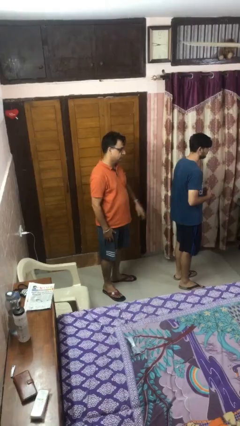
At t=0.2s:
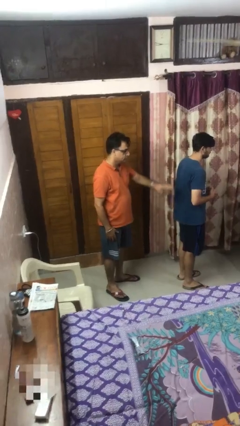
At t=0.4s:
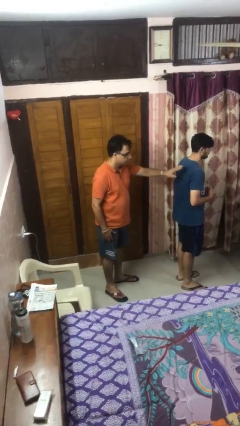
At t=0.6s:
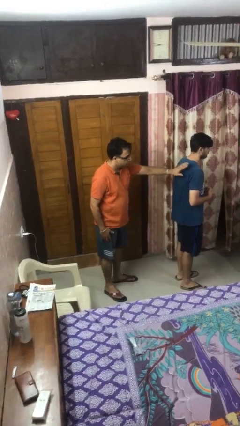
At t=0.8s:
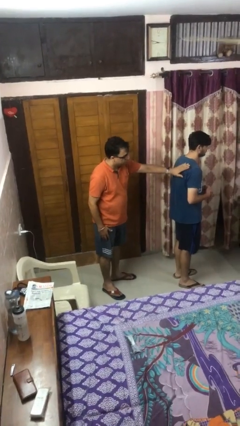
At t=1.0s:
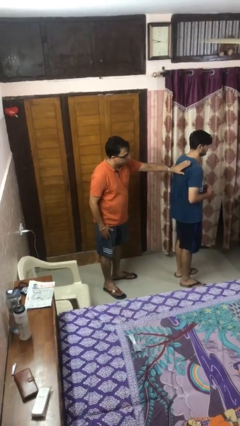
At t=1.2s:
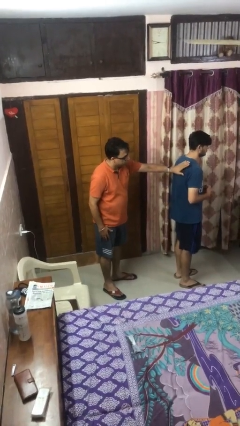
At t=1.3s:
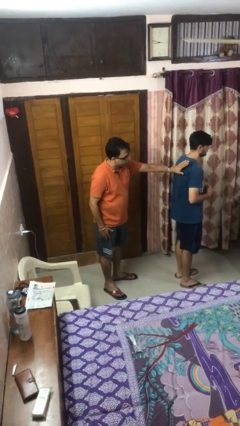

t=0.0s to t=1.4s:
person touches back of person

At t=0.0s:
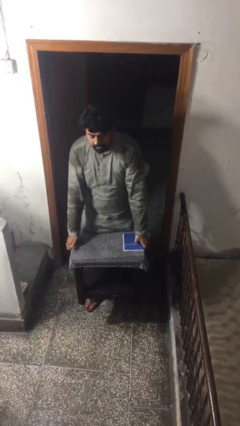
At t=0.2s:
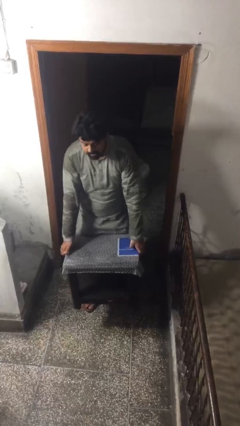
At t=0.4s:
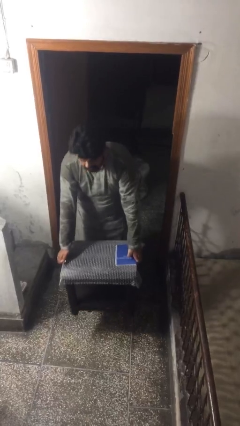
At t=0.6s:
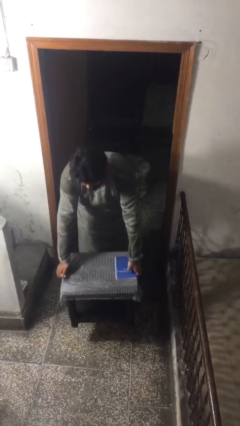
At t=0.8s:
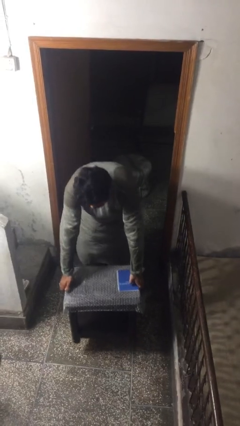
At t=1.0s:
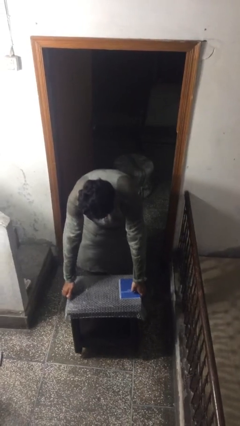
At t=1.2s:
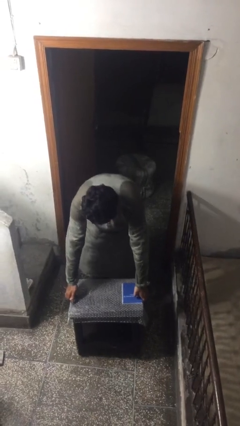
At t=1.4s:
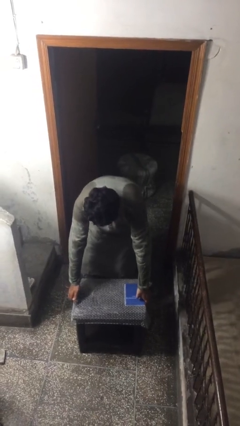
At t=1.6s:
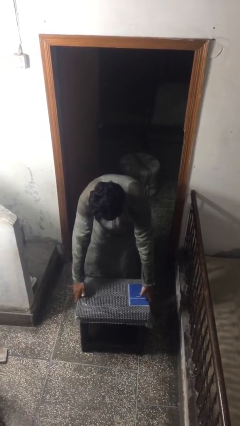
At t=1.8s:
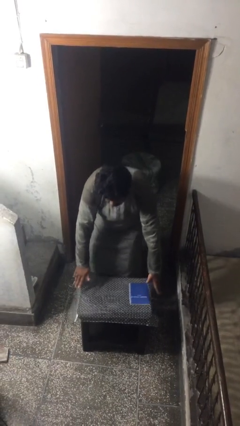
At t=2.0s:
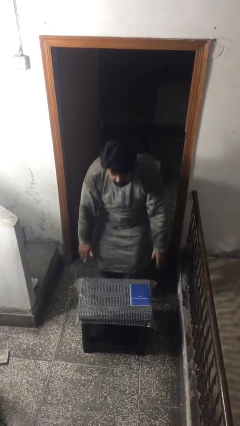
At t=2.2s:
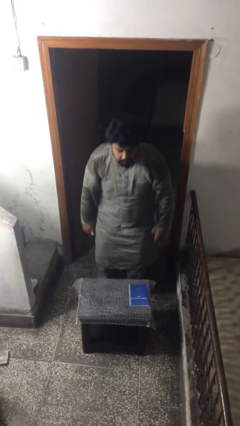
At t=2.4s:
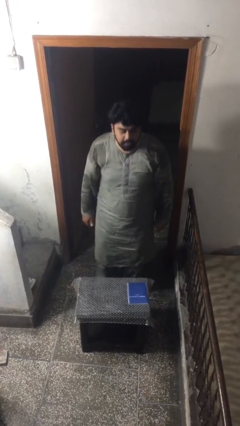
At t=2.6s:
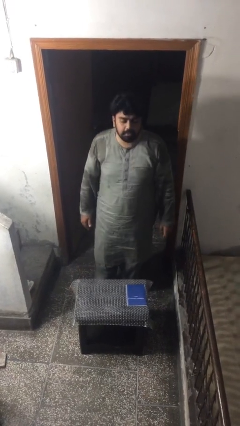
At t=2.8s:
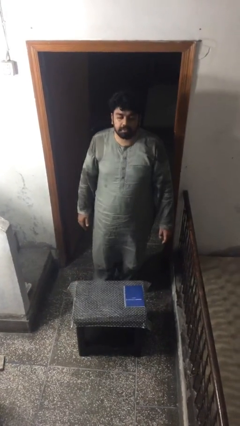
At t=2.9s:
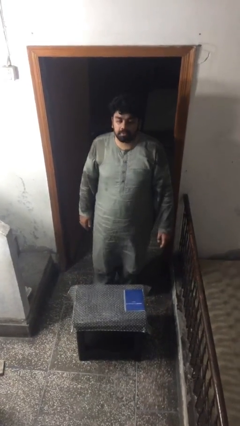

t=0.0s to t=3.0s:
person puts down object on floor

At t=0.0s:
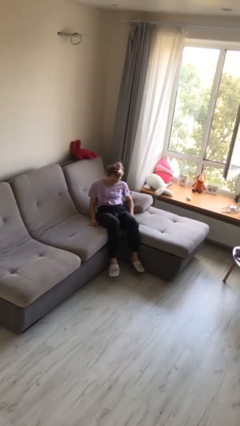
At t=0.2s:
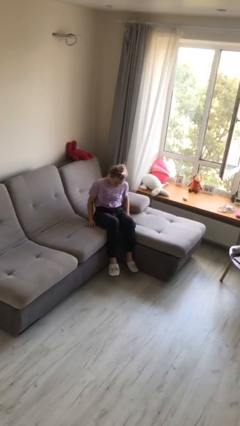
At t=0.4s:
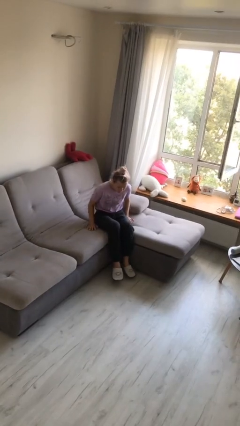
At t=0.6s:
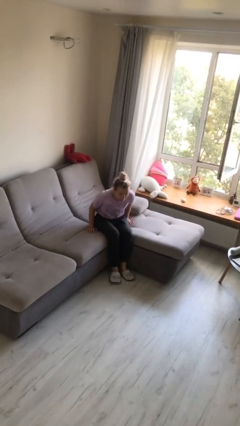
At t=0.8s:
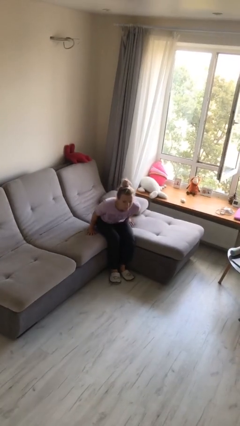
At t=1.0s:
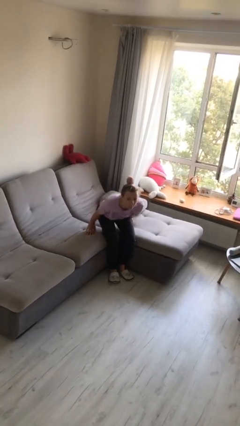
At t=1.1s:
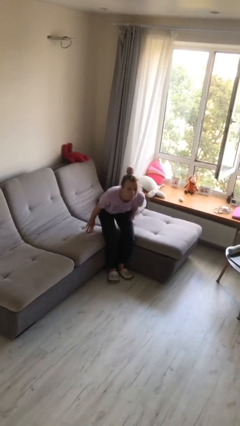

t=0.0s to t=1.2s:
person stands up

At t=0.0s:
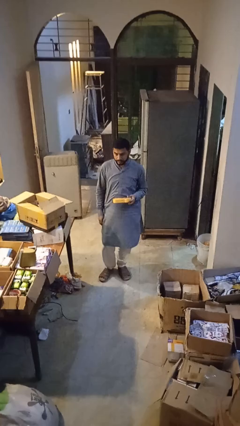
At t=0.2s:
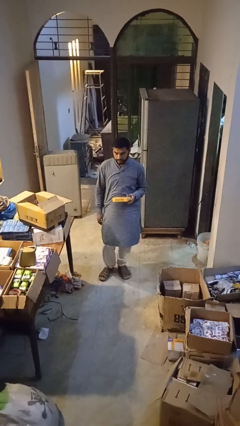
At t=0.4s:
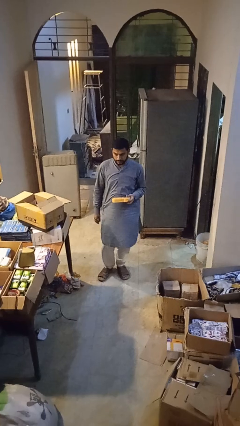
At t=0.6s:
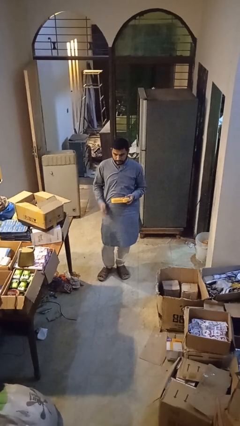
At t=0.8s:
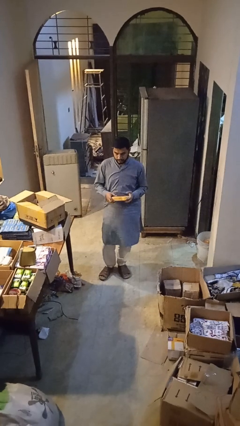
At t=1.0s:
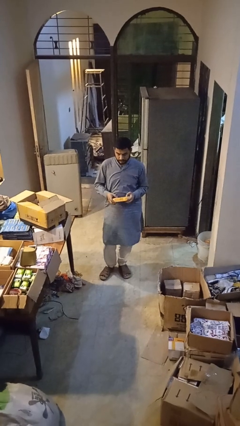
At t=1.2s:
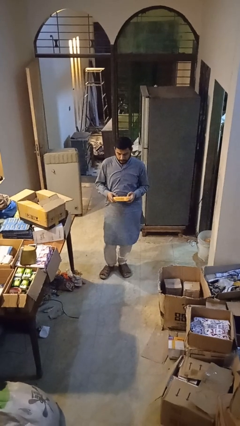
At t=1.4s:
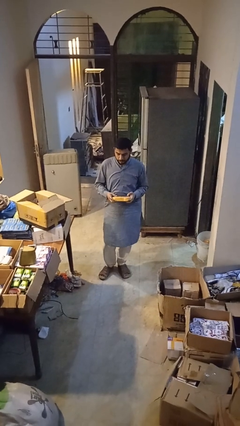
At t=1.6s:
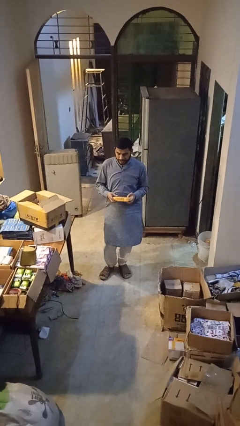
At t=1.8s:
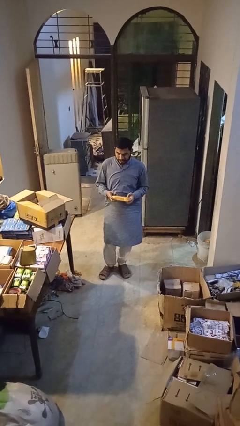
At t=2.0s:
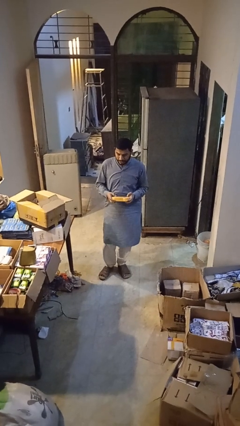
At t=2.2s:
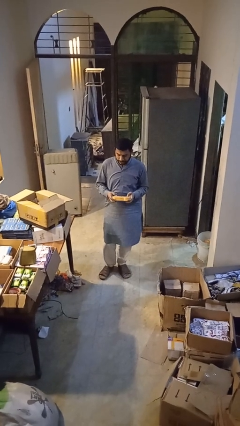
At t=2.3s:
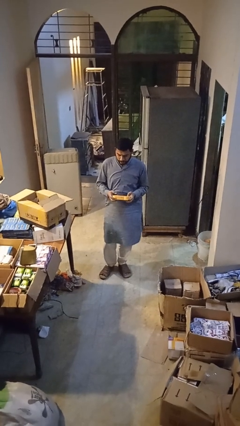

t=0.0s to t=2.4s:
person interacts with handheld game

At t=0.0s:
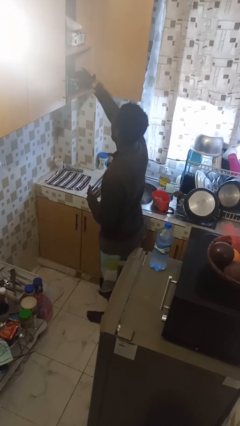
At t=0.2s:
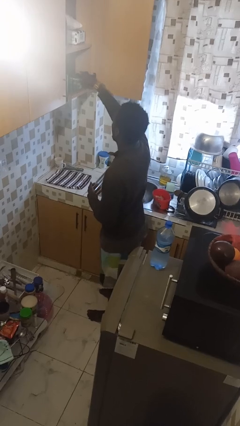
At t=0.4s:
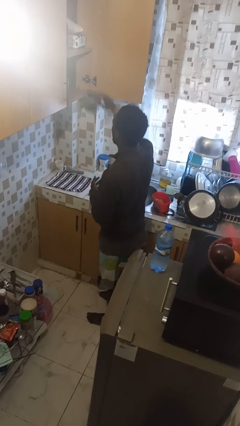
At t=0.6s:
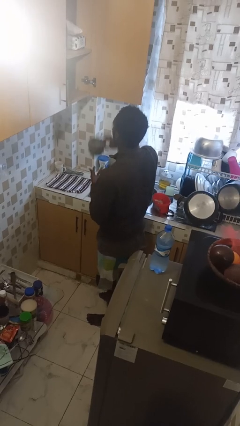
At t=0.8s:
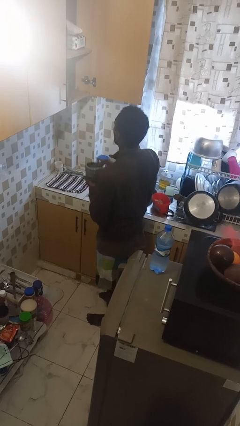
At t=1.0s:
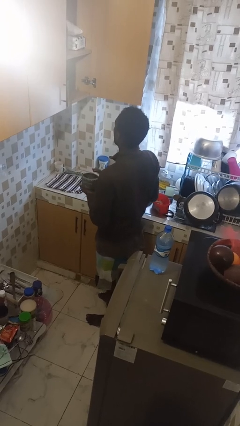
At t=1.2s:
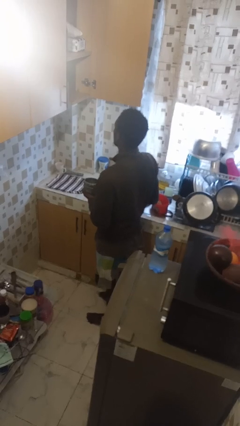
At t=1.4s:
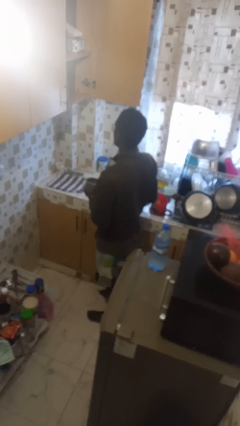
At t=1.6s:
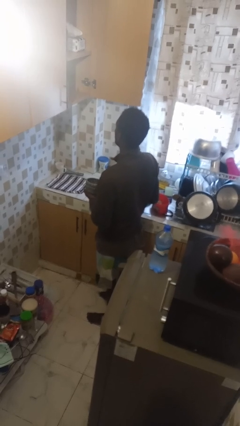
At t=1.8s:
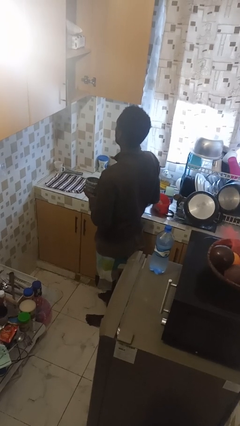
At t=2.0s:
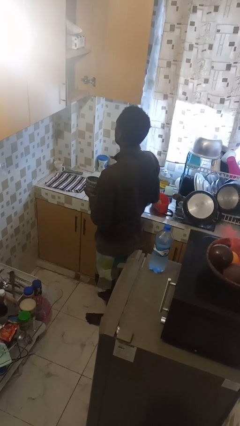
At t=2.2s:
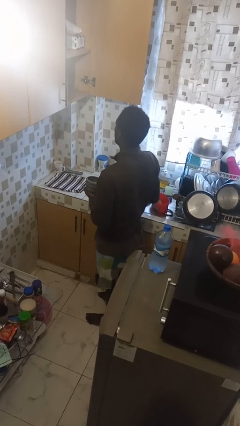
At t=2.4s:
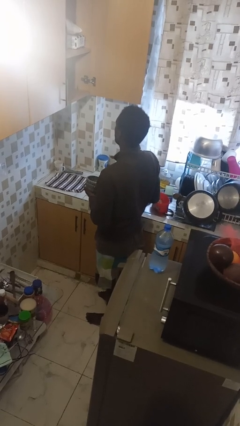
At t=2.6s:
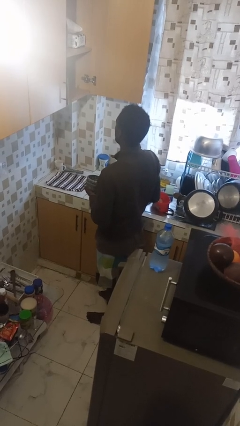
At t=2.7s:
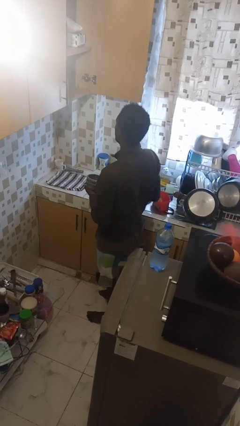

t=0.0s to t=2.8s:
person picks up object from cabinet

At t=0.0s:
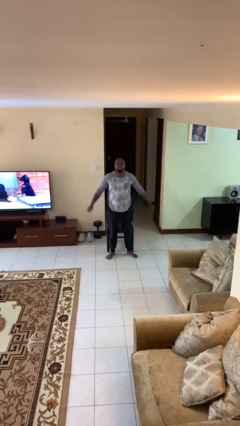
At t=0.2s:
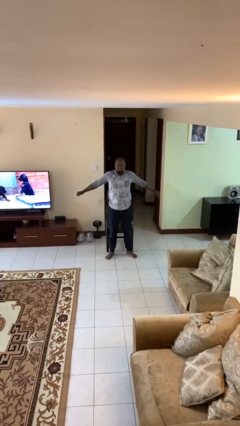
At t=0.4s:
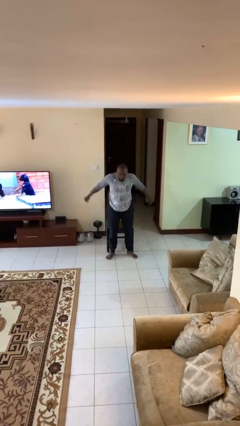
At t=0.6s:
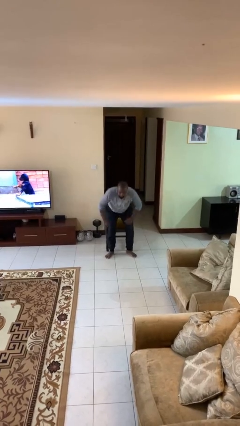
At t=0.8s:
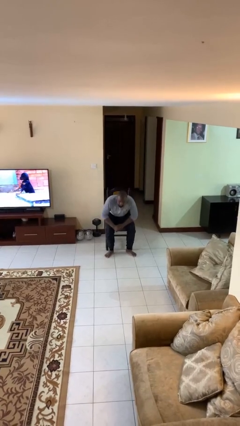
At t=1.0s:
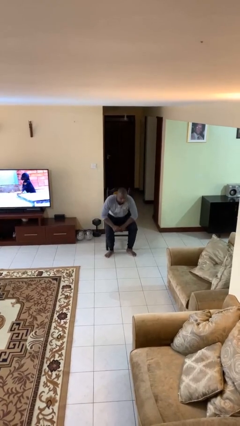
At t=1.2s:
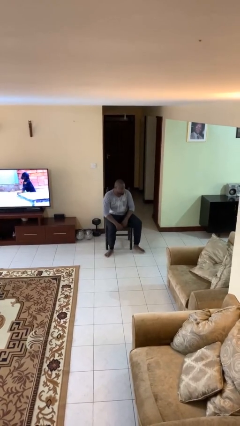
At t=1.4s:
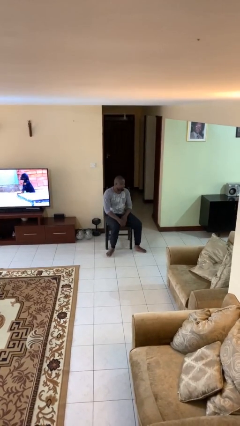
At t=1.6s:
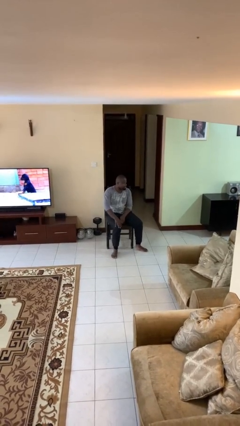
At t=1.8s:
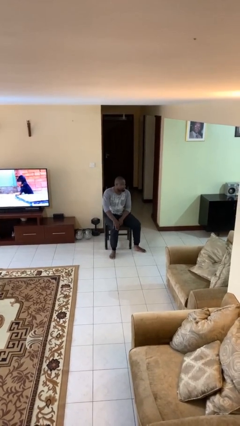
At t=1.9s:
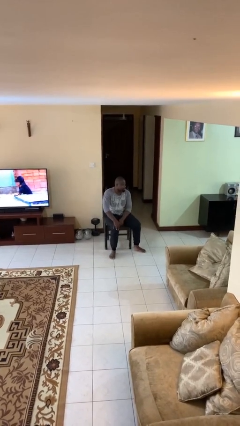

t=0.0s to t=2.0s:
person sits down

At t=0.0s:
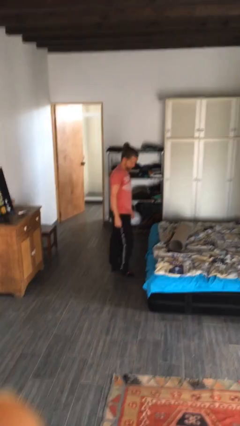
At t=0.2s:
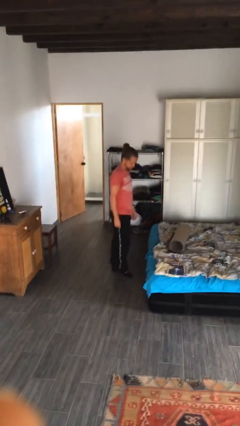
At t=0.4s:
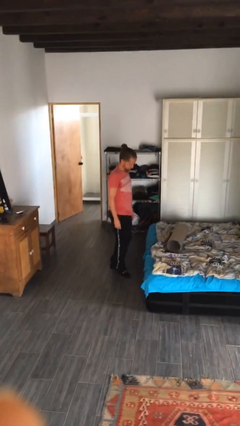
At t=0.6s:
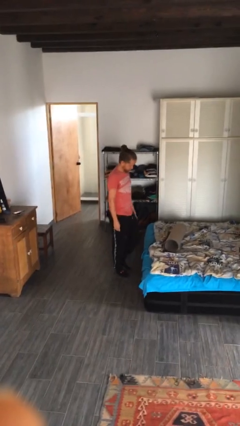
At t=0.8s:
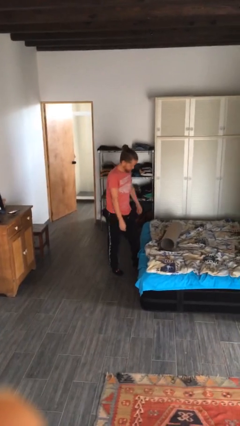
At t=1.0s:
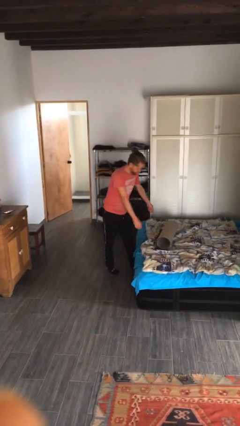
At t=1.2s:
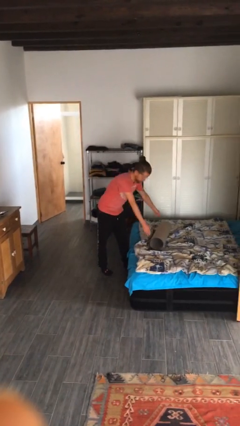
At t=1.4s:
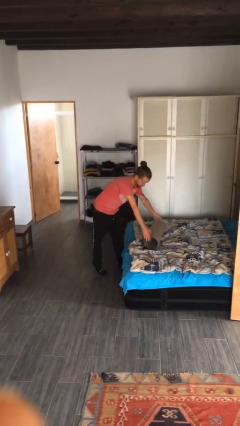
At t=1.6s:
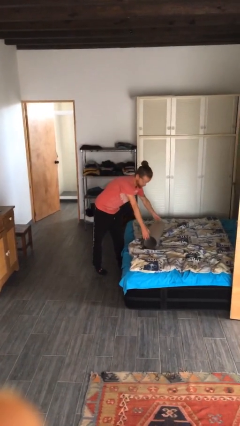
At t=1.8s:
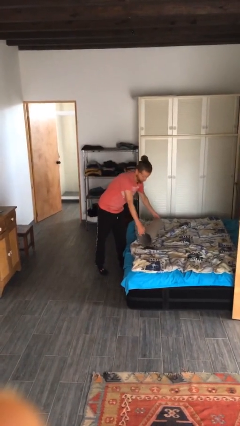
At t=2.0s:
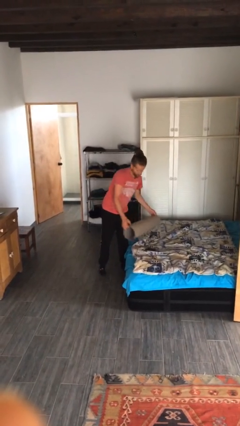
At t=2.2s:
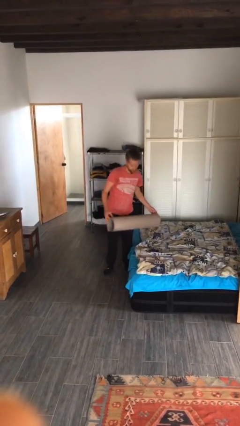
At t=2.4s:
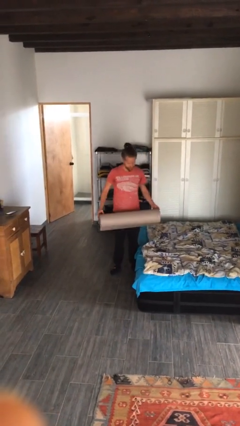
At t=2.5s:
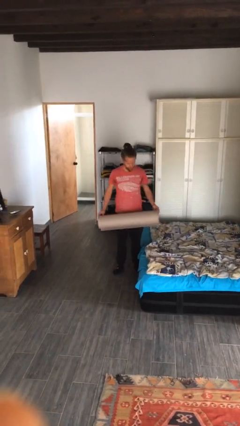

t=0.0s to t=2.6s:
person picks up object from bed

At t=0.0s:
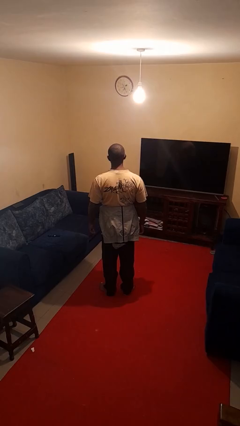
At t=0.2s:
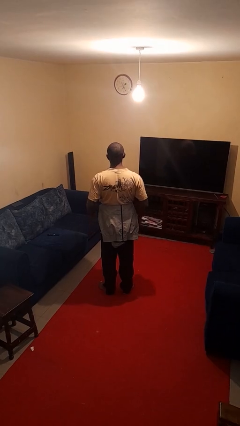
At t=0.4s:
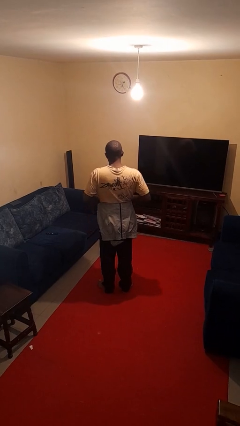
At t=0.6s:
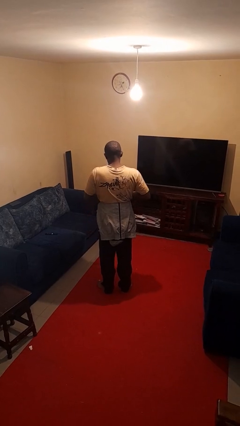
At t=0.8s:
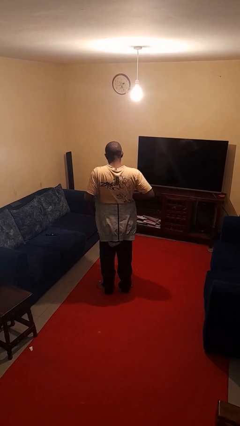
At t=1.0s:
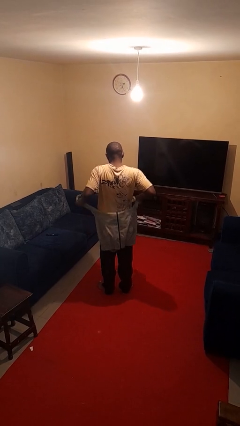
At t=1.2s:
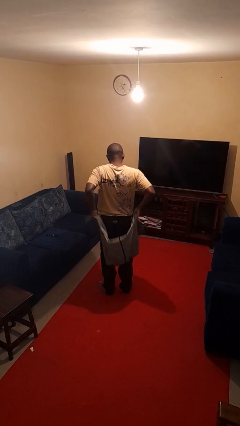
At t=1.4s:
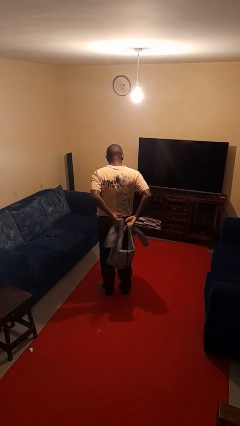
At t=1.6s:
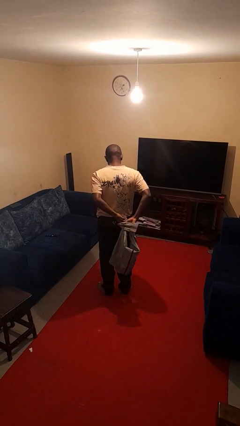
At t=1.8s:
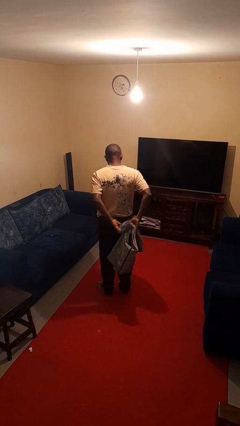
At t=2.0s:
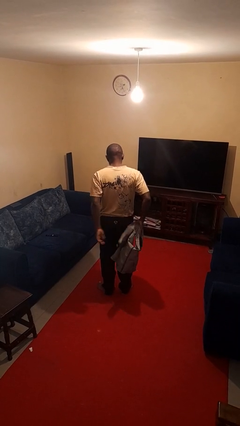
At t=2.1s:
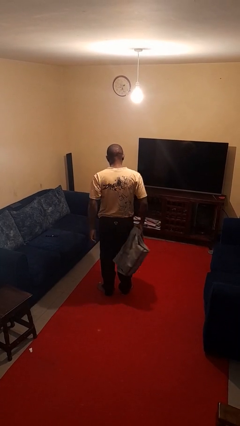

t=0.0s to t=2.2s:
person unties jacket around waist
